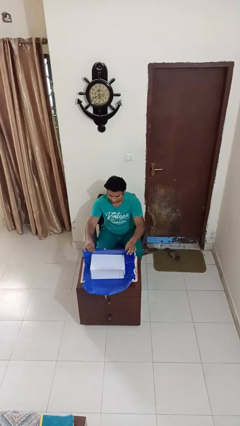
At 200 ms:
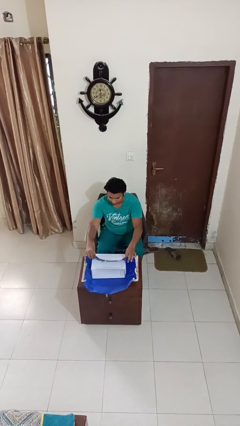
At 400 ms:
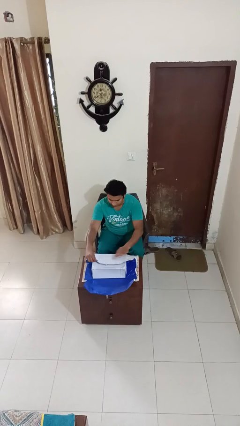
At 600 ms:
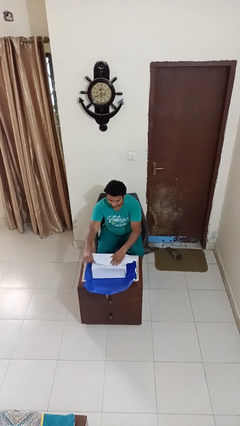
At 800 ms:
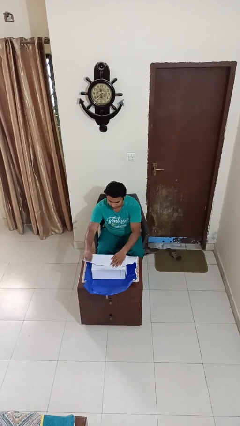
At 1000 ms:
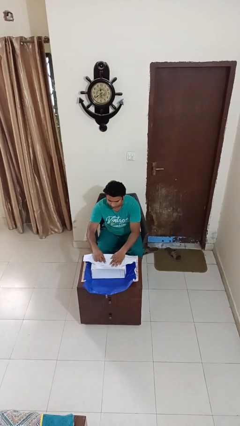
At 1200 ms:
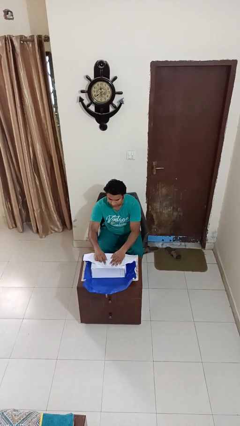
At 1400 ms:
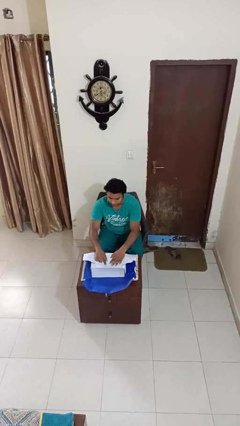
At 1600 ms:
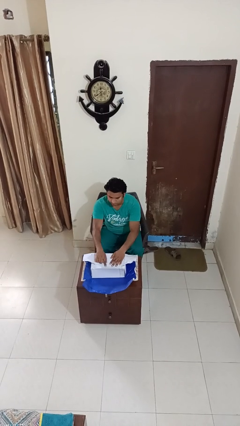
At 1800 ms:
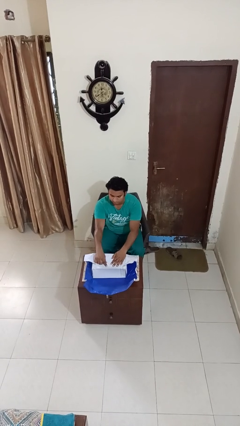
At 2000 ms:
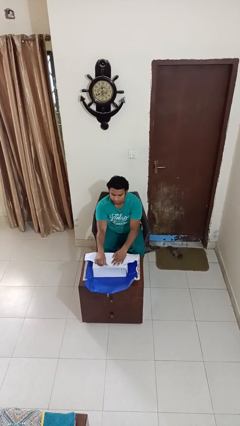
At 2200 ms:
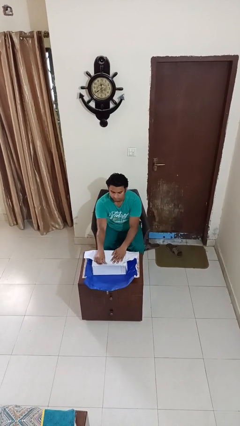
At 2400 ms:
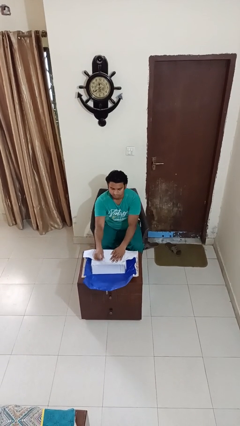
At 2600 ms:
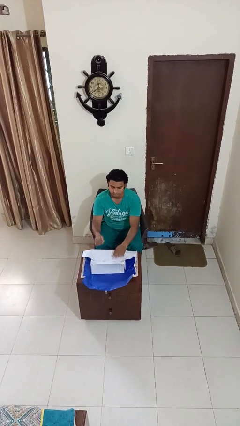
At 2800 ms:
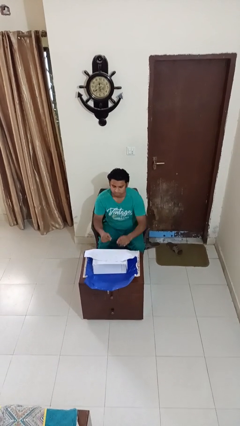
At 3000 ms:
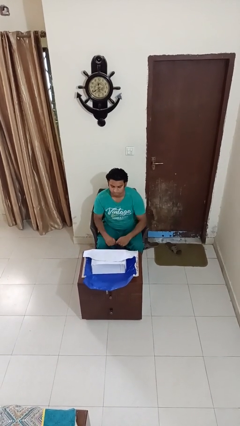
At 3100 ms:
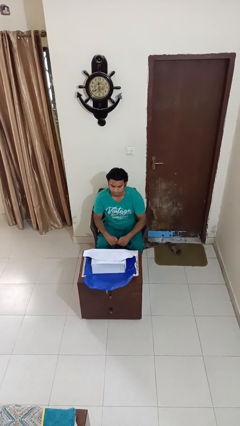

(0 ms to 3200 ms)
person wraps box

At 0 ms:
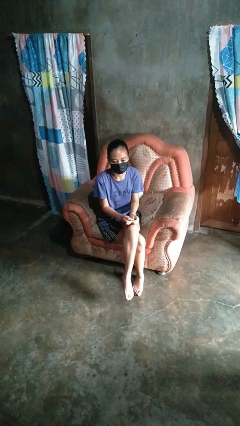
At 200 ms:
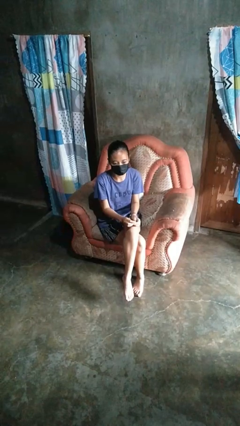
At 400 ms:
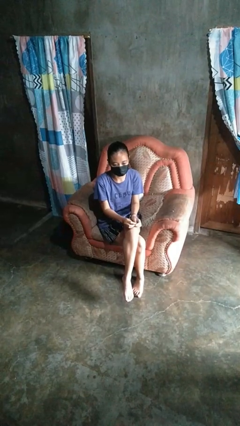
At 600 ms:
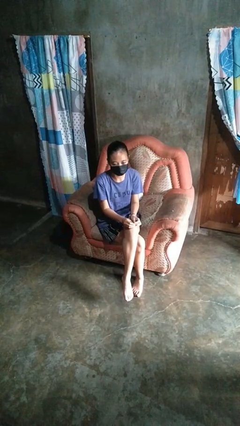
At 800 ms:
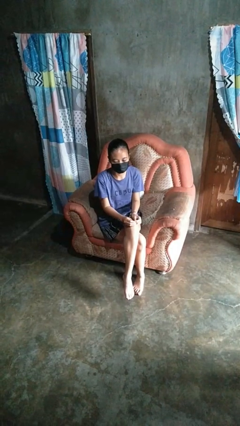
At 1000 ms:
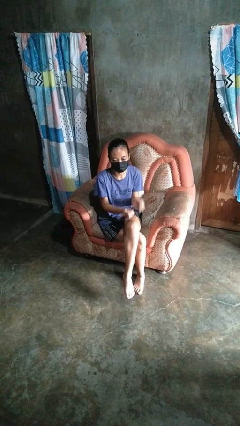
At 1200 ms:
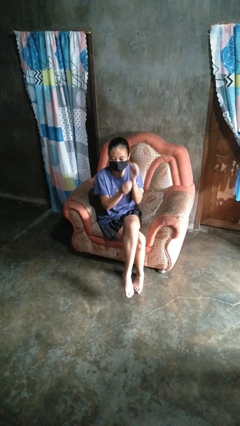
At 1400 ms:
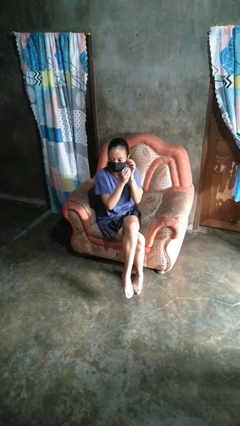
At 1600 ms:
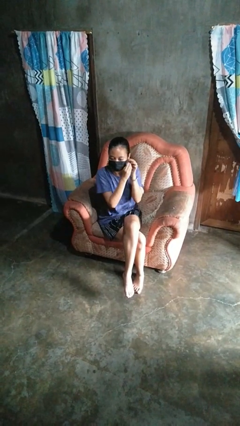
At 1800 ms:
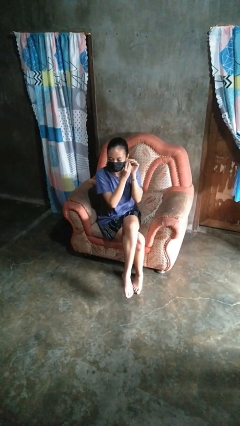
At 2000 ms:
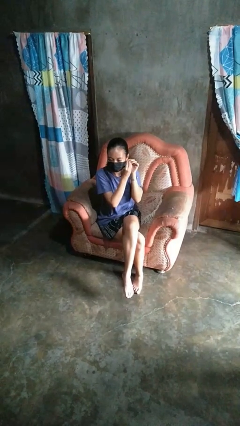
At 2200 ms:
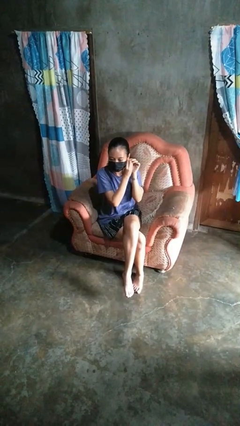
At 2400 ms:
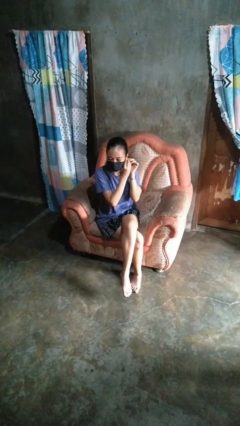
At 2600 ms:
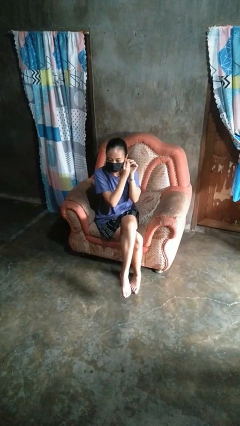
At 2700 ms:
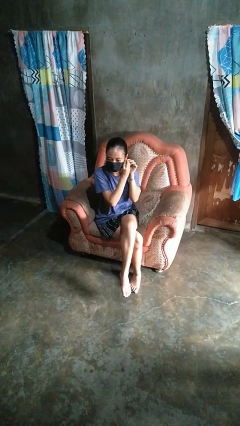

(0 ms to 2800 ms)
person puts on earrings

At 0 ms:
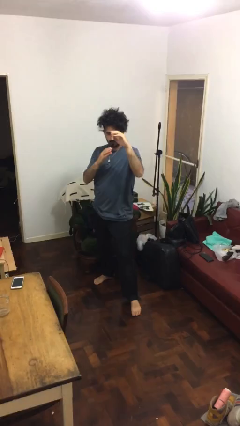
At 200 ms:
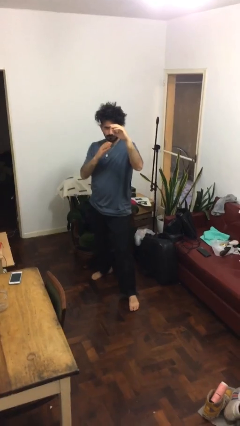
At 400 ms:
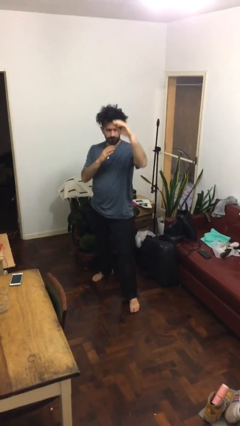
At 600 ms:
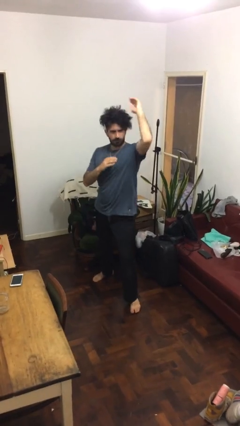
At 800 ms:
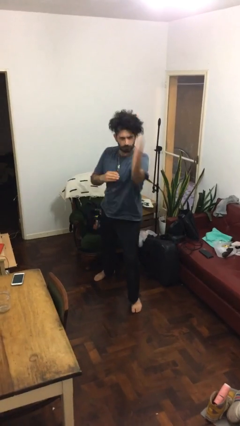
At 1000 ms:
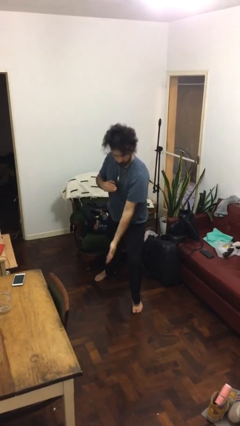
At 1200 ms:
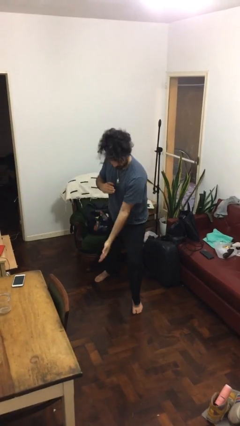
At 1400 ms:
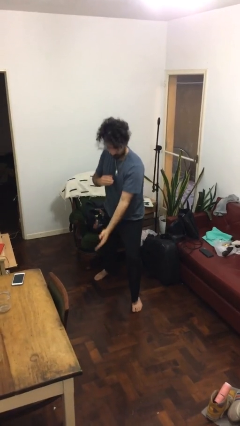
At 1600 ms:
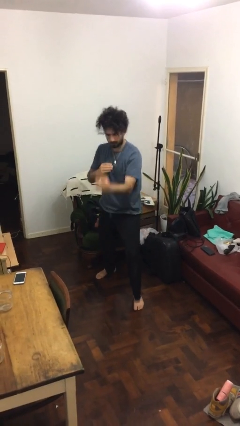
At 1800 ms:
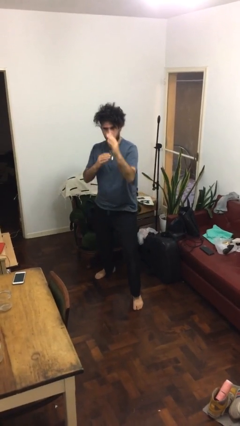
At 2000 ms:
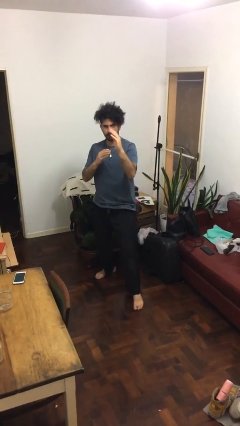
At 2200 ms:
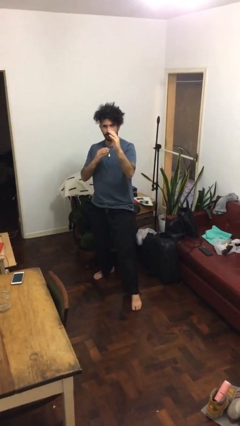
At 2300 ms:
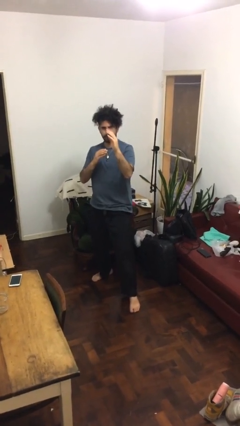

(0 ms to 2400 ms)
person karate chop

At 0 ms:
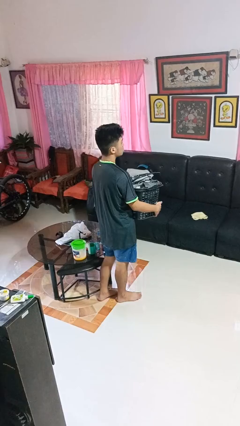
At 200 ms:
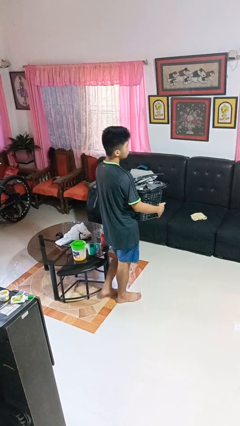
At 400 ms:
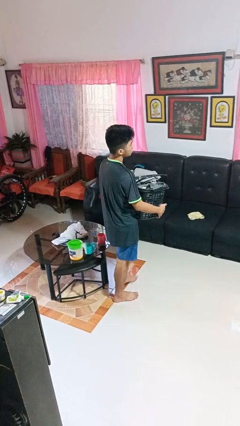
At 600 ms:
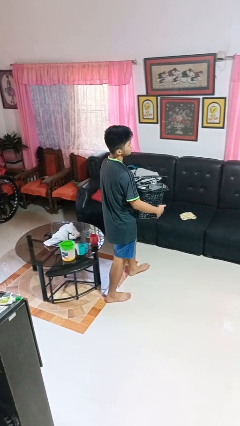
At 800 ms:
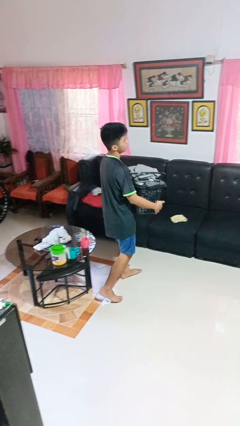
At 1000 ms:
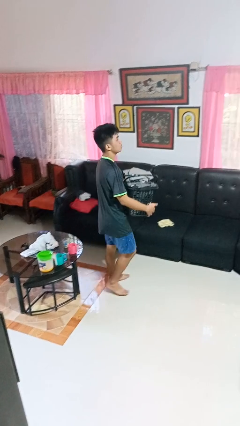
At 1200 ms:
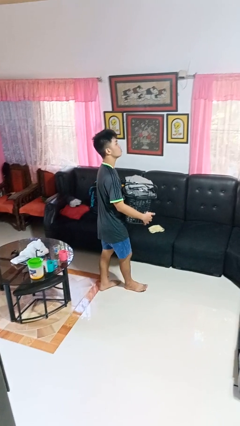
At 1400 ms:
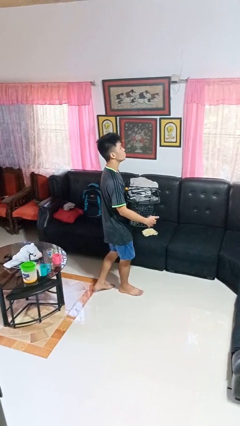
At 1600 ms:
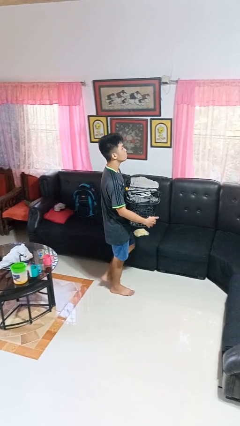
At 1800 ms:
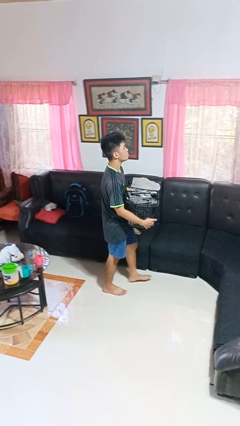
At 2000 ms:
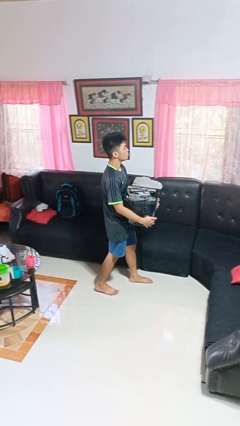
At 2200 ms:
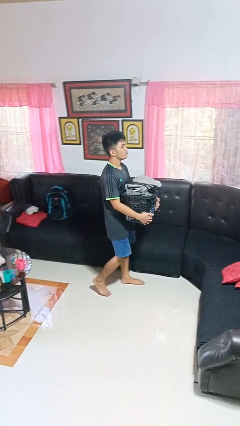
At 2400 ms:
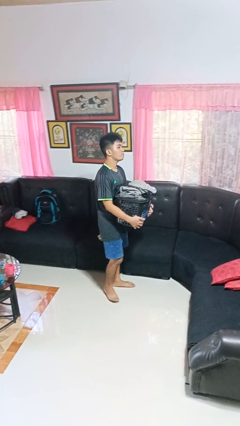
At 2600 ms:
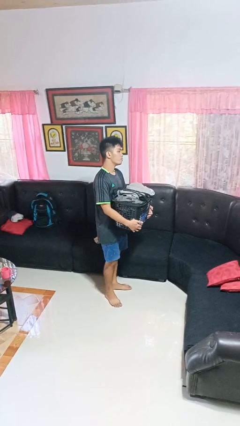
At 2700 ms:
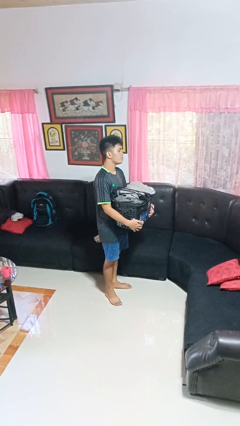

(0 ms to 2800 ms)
person carries laundry basket

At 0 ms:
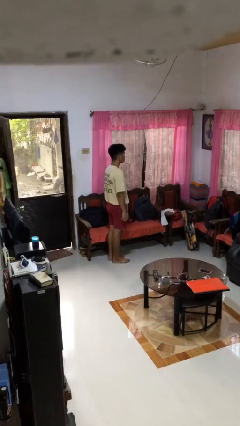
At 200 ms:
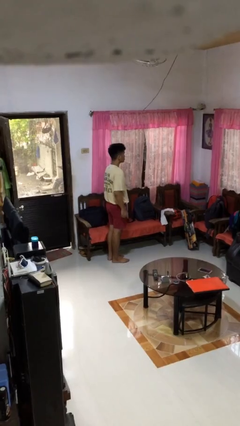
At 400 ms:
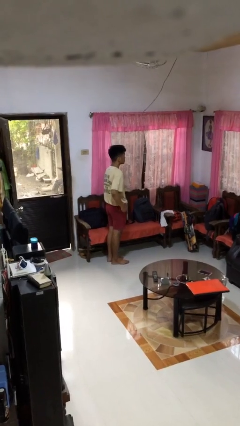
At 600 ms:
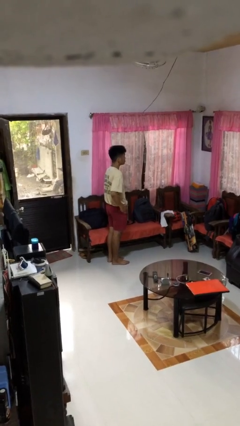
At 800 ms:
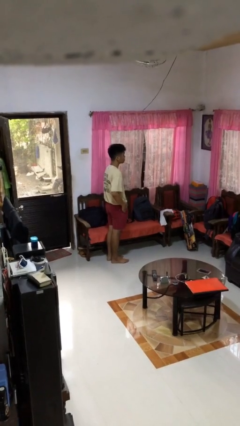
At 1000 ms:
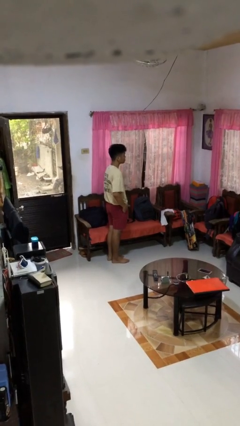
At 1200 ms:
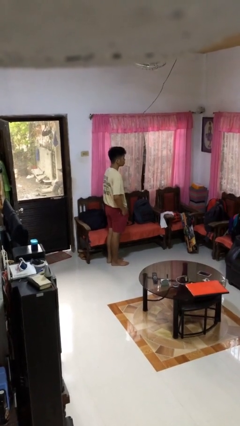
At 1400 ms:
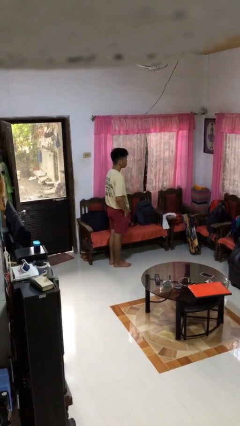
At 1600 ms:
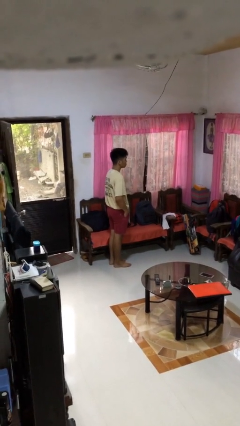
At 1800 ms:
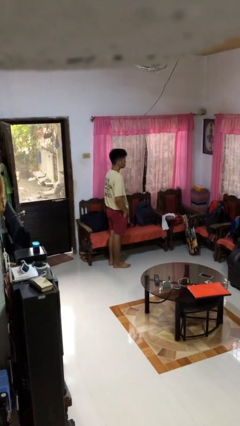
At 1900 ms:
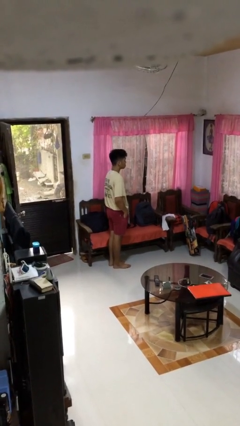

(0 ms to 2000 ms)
person puts hands in back pockets

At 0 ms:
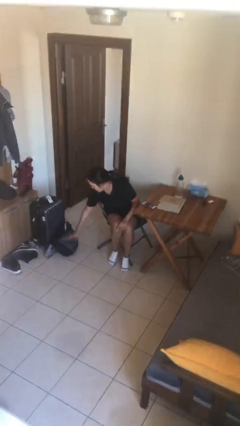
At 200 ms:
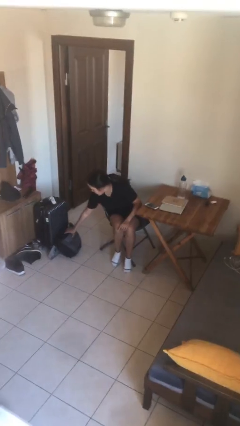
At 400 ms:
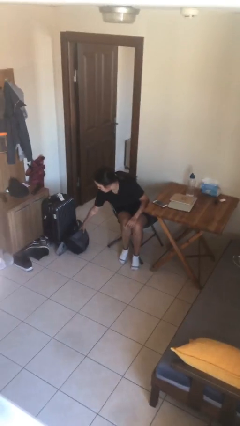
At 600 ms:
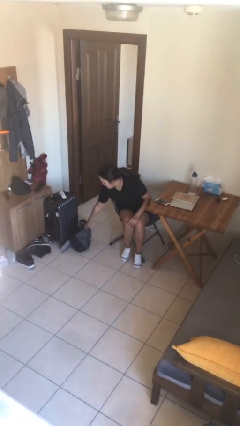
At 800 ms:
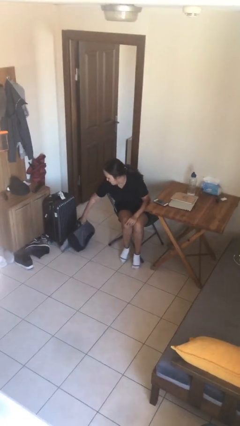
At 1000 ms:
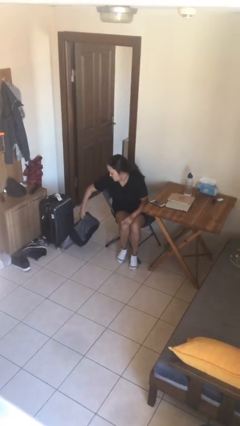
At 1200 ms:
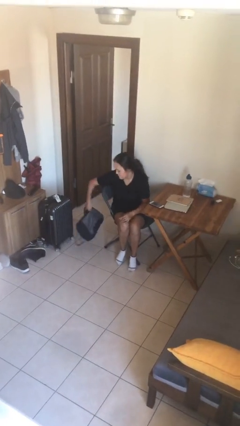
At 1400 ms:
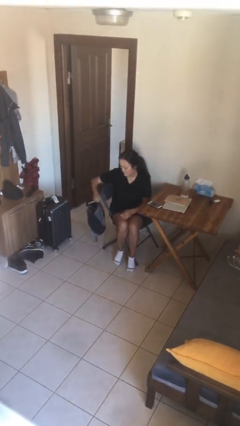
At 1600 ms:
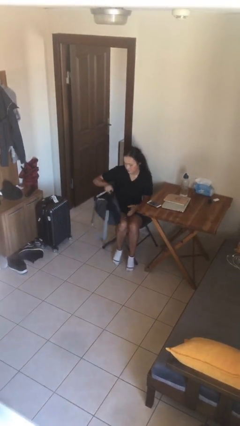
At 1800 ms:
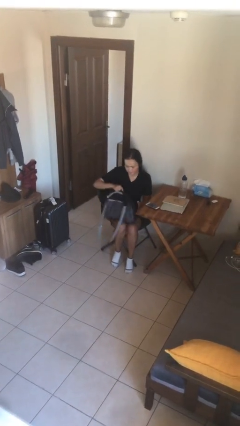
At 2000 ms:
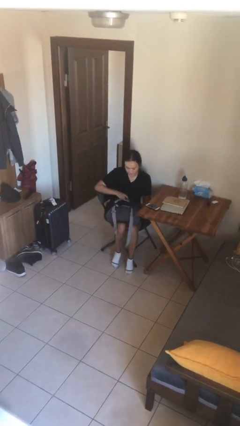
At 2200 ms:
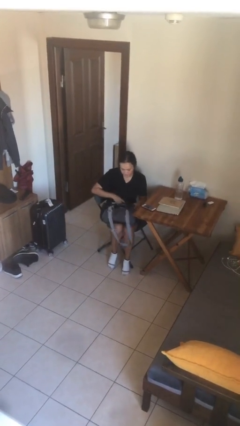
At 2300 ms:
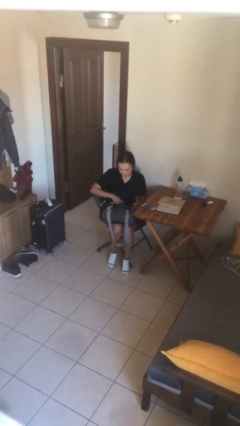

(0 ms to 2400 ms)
person picks up object from floor

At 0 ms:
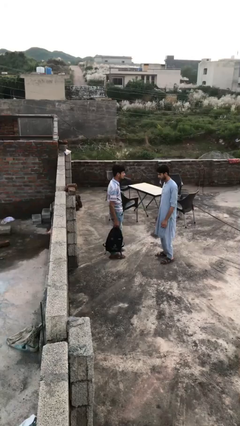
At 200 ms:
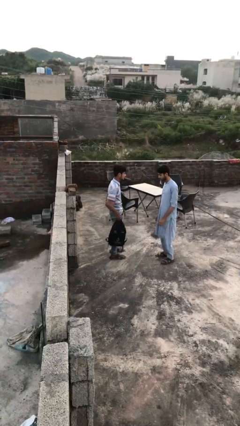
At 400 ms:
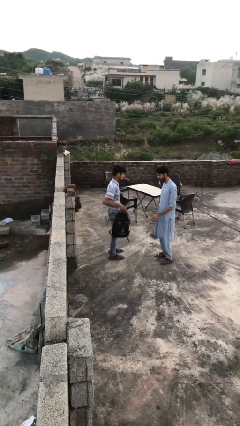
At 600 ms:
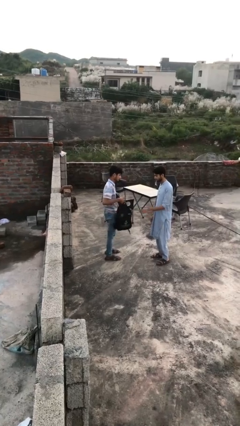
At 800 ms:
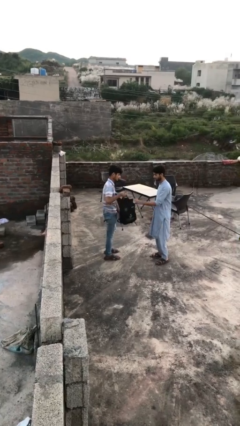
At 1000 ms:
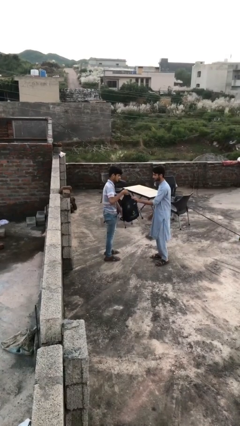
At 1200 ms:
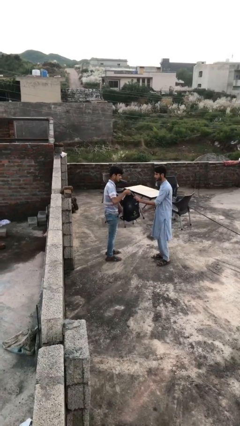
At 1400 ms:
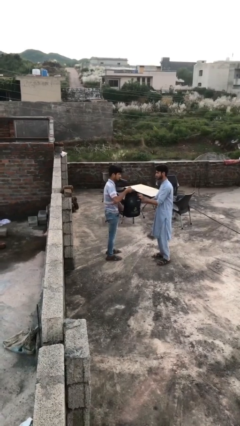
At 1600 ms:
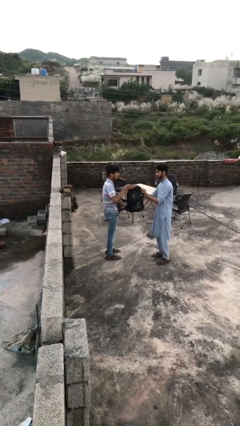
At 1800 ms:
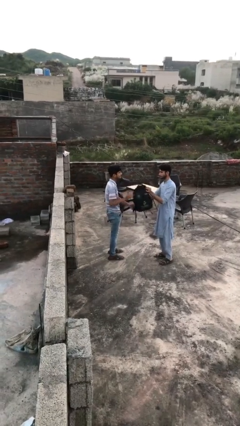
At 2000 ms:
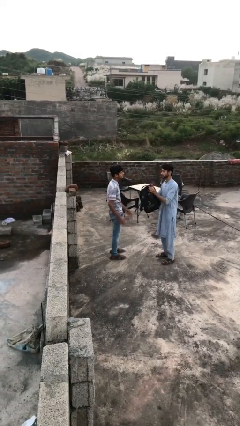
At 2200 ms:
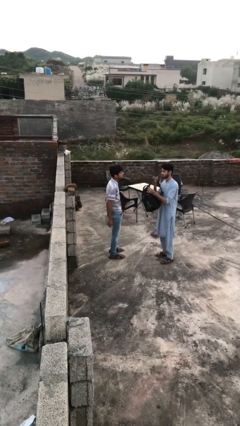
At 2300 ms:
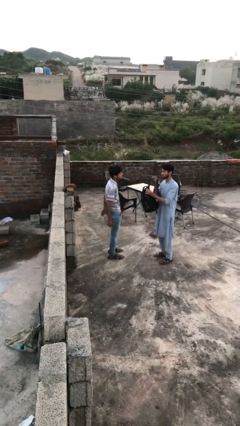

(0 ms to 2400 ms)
person transfers object to person
